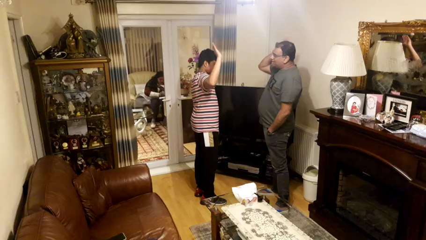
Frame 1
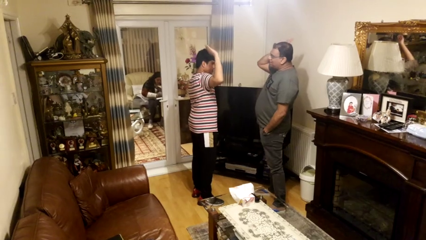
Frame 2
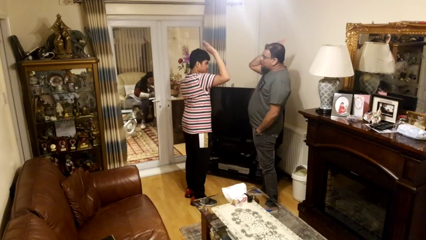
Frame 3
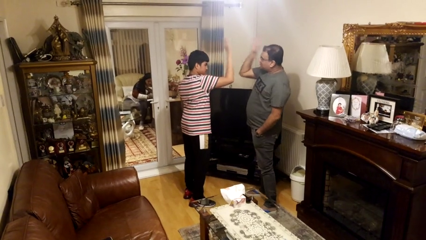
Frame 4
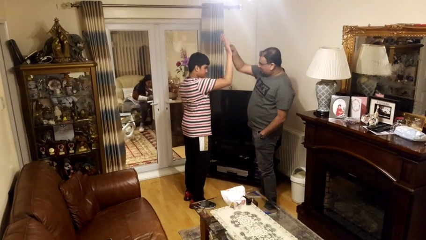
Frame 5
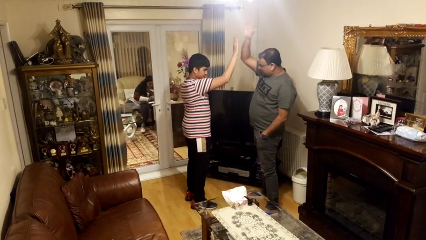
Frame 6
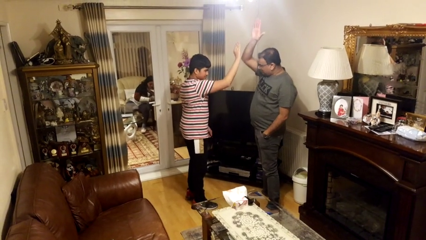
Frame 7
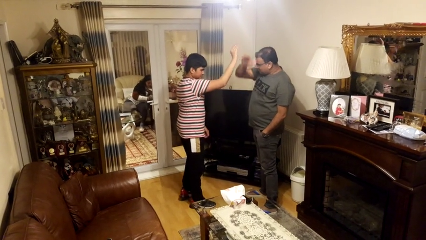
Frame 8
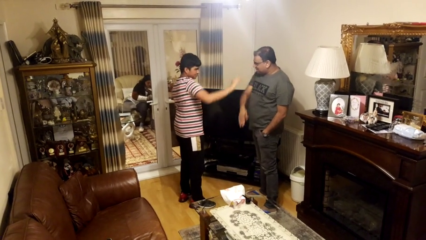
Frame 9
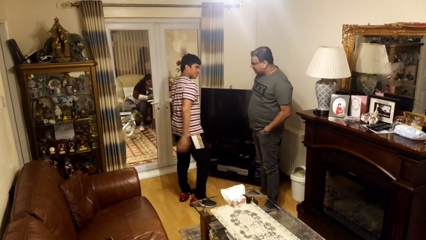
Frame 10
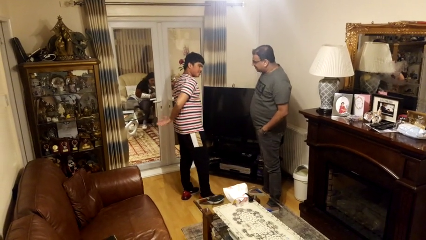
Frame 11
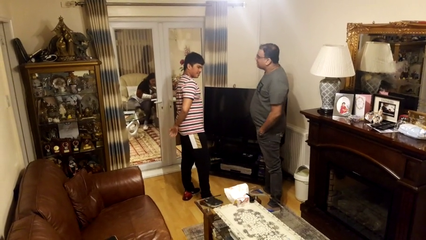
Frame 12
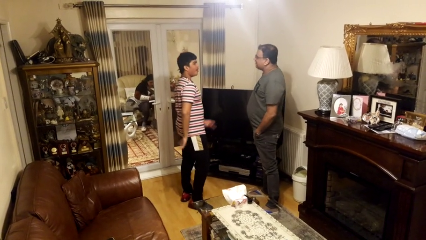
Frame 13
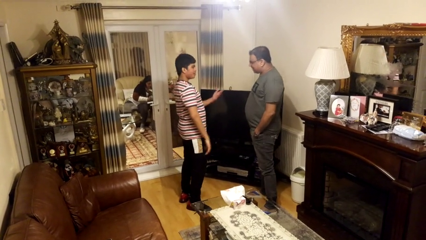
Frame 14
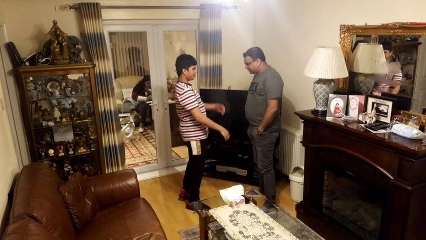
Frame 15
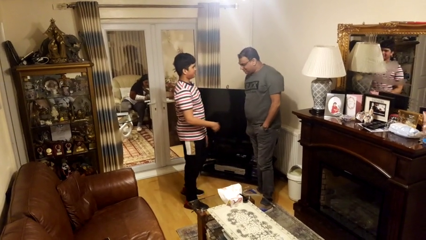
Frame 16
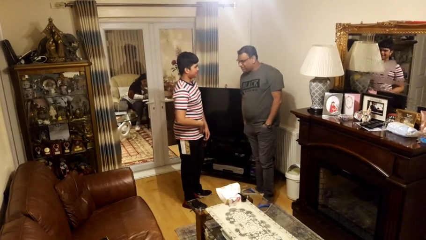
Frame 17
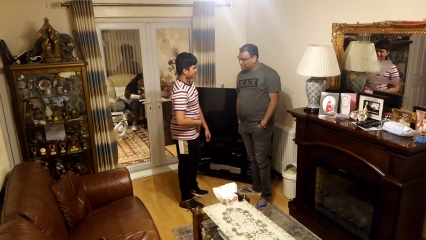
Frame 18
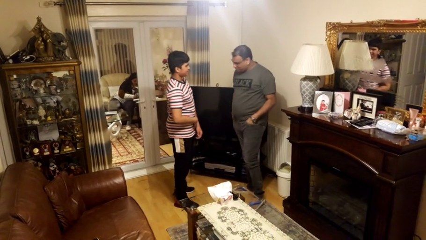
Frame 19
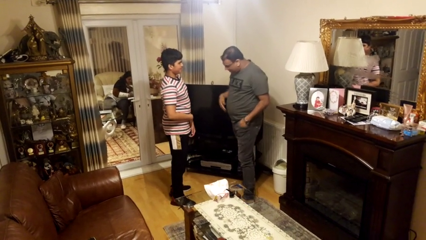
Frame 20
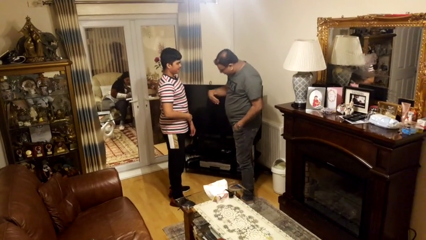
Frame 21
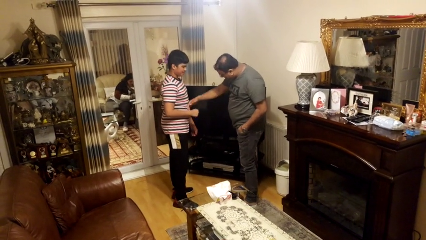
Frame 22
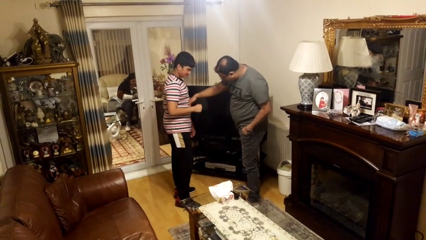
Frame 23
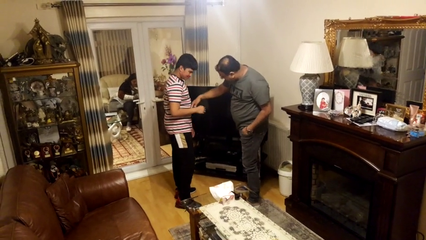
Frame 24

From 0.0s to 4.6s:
person highfives hand

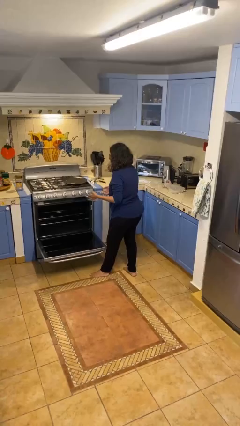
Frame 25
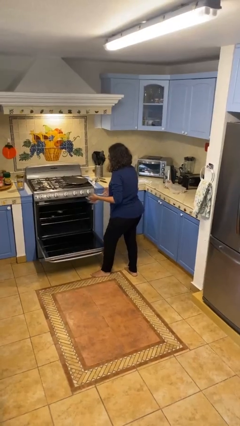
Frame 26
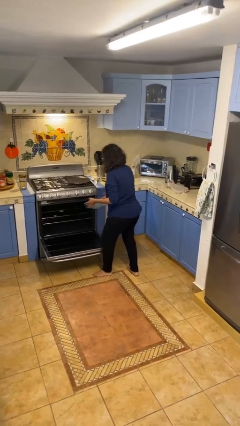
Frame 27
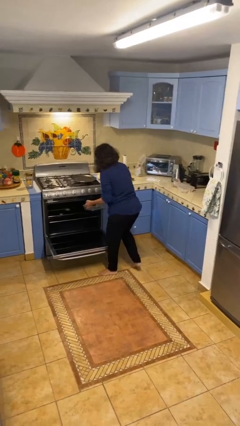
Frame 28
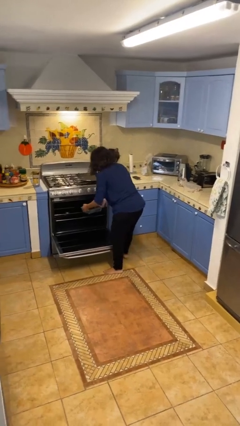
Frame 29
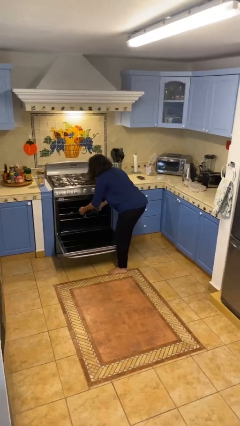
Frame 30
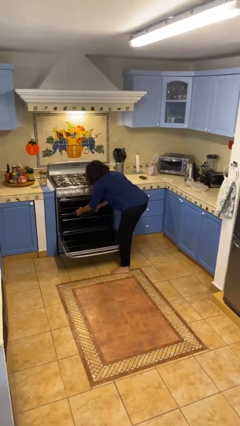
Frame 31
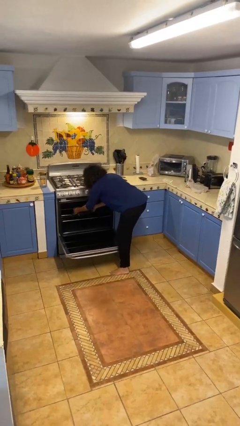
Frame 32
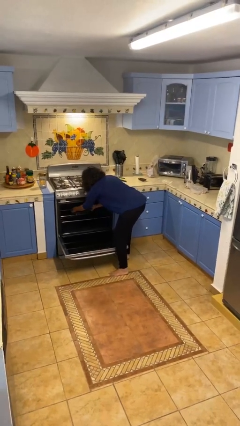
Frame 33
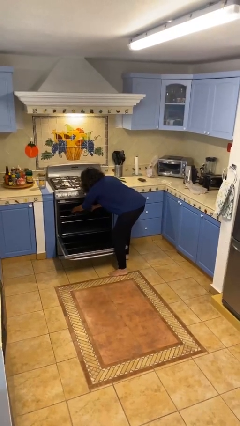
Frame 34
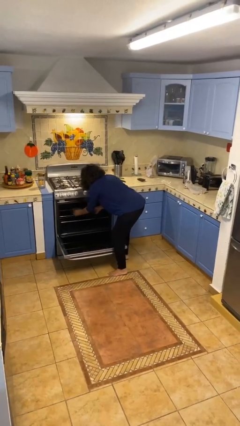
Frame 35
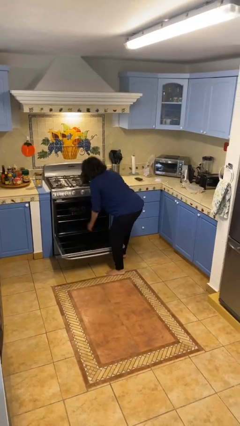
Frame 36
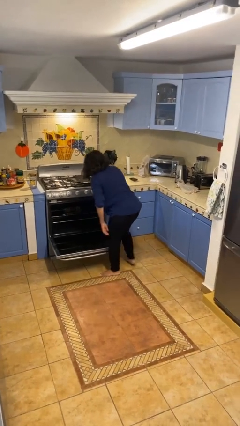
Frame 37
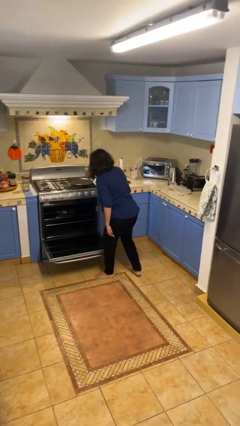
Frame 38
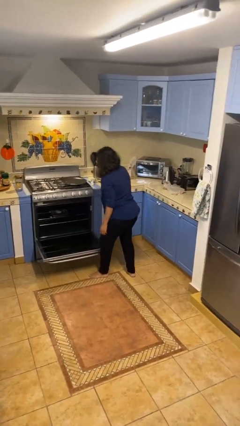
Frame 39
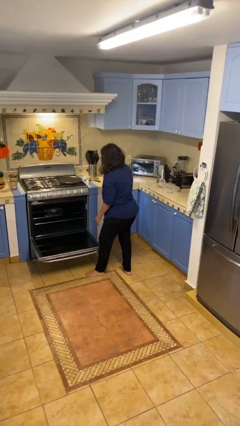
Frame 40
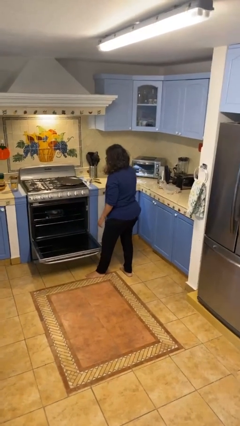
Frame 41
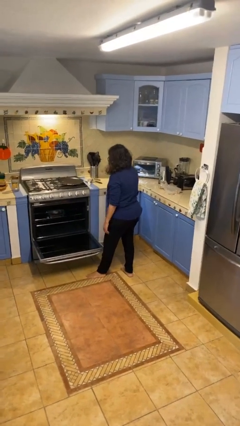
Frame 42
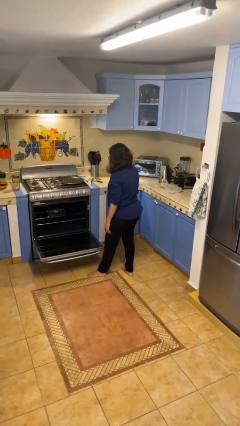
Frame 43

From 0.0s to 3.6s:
person puts object into oven

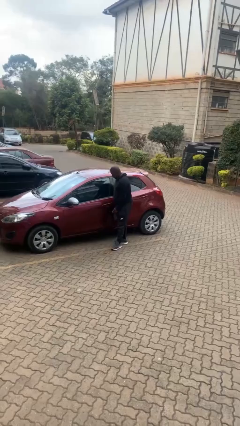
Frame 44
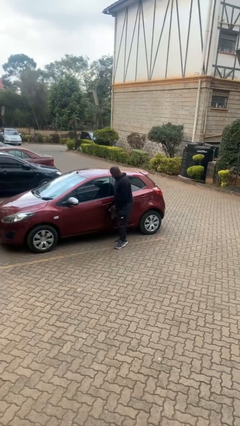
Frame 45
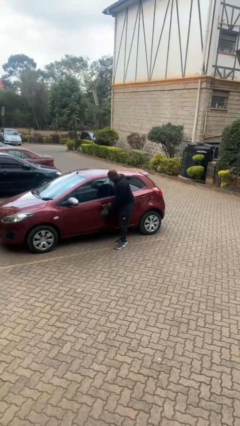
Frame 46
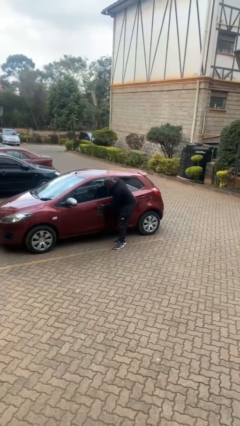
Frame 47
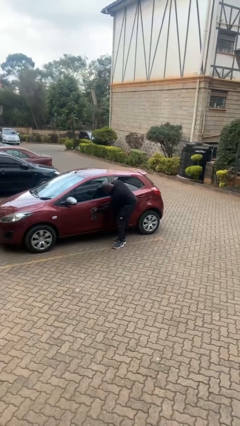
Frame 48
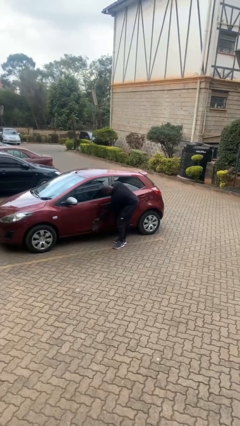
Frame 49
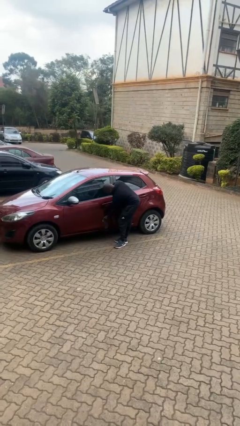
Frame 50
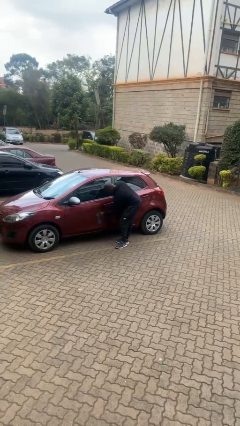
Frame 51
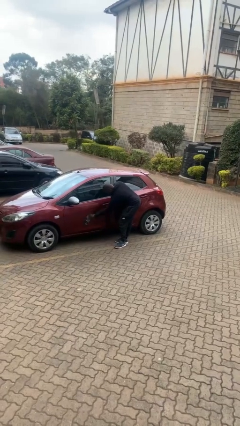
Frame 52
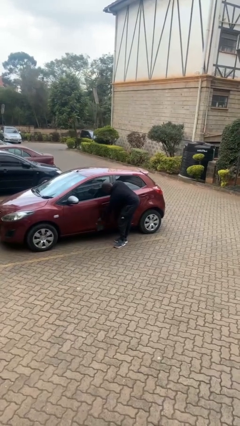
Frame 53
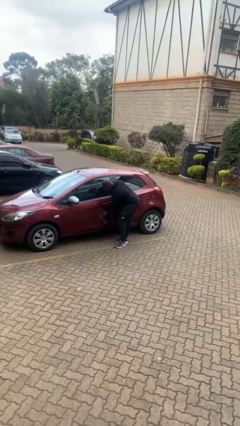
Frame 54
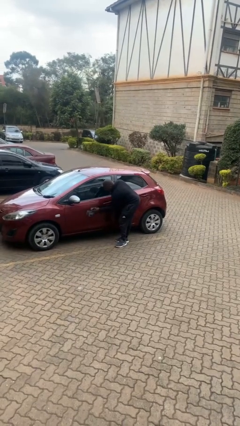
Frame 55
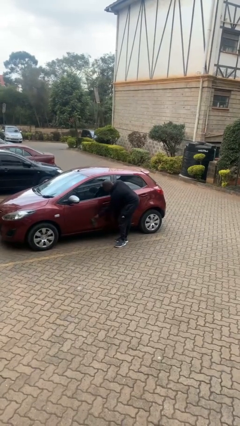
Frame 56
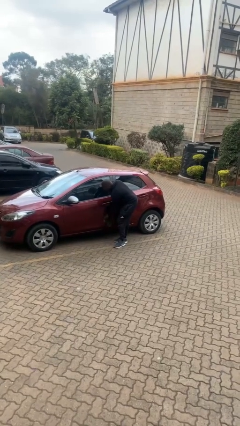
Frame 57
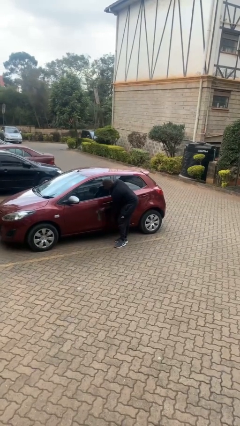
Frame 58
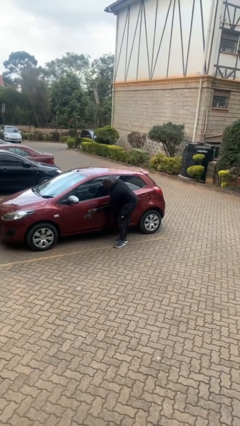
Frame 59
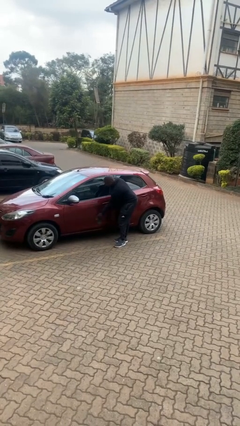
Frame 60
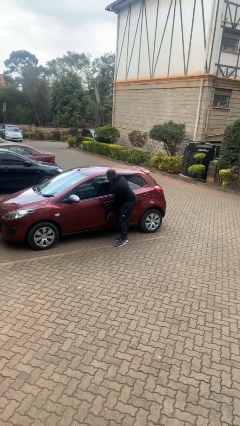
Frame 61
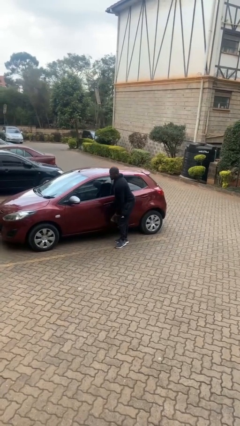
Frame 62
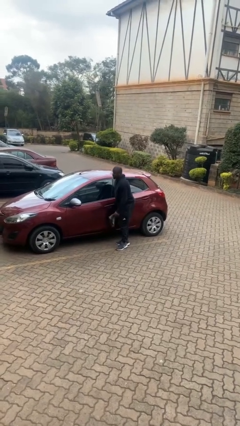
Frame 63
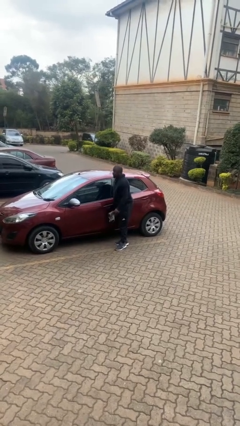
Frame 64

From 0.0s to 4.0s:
person polishes car with rag

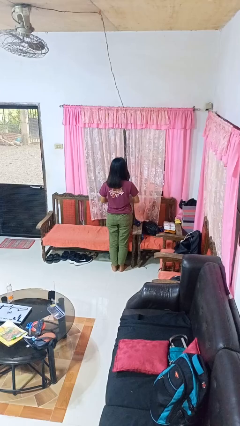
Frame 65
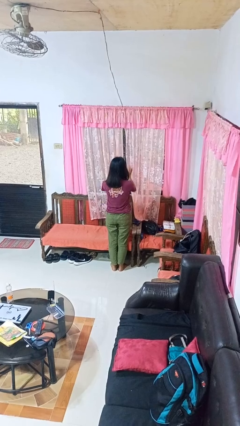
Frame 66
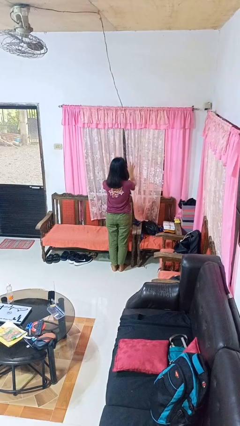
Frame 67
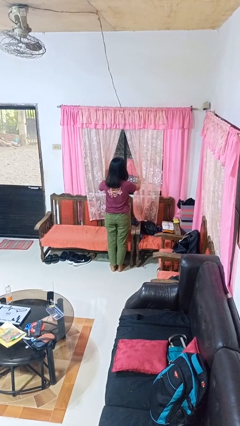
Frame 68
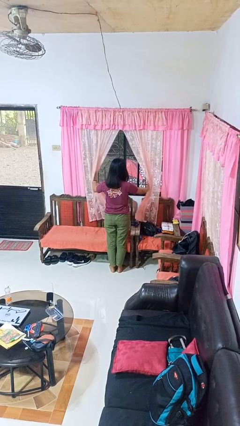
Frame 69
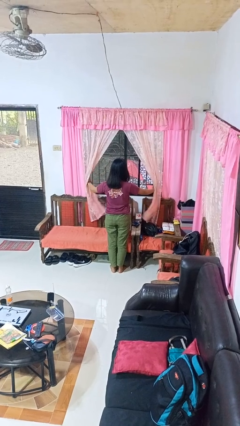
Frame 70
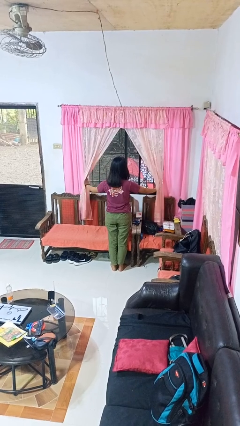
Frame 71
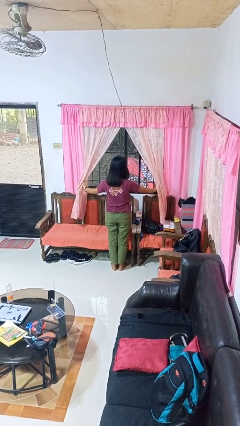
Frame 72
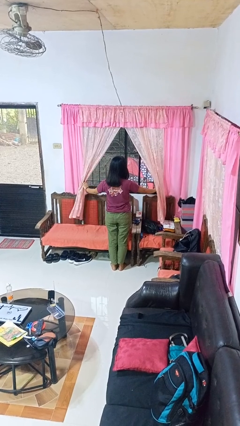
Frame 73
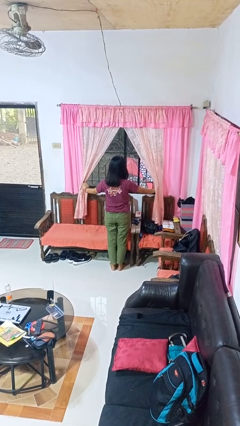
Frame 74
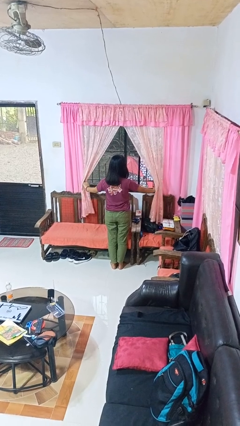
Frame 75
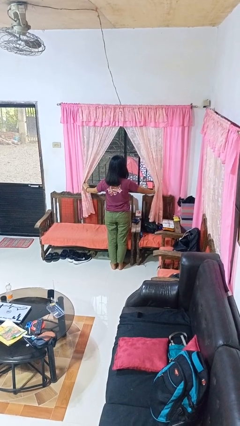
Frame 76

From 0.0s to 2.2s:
person opens curtains

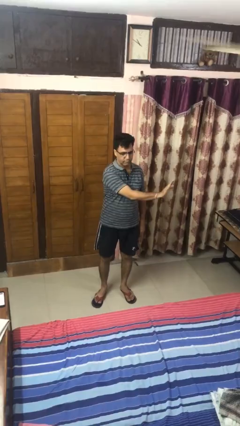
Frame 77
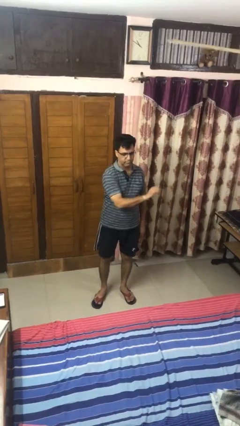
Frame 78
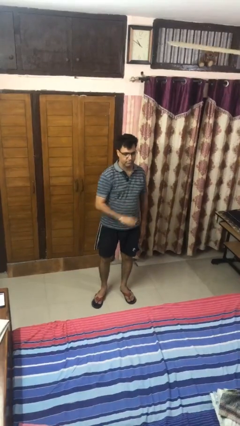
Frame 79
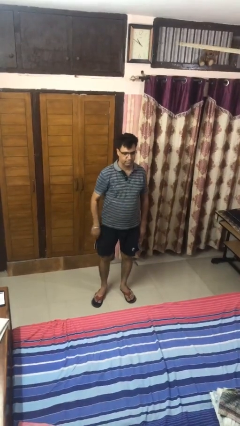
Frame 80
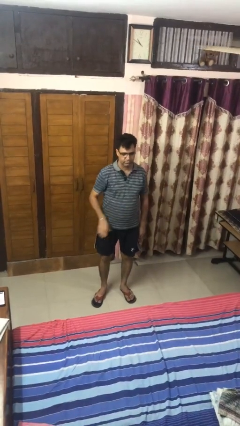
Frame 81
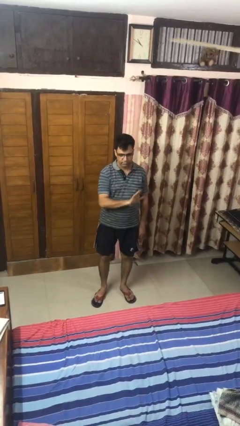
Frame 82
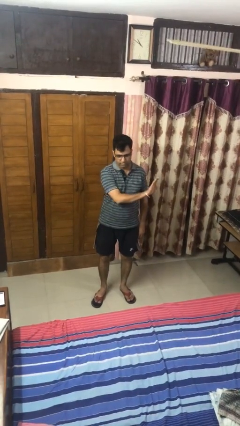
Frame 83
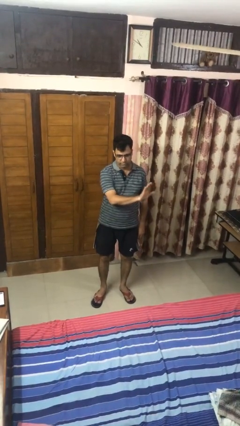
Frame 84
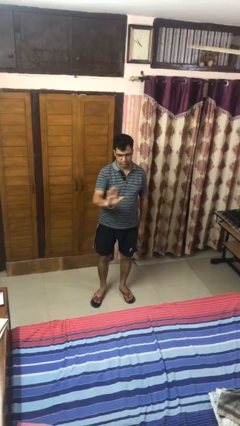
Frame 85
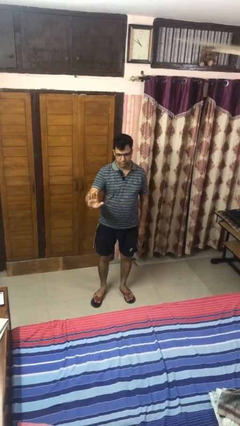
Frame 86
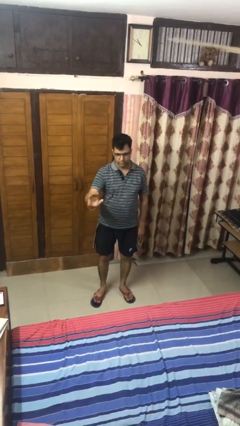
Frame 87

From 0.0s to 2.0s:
person gestures swipe right

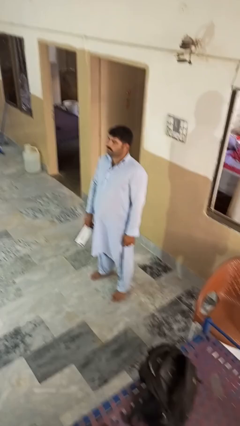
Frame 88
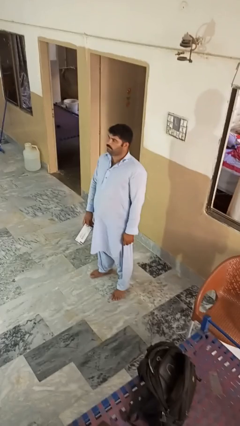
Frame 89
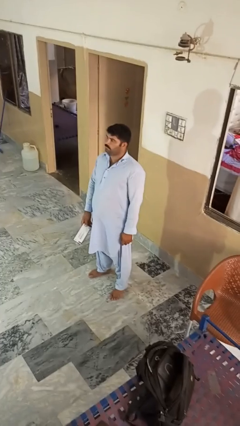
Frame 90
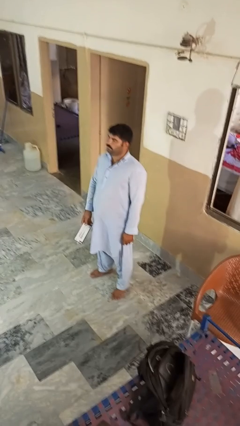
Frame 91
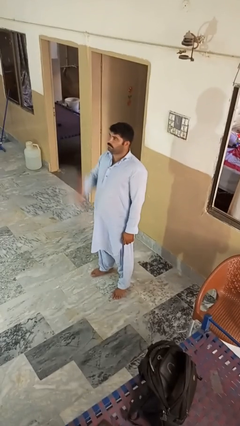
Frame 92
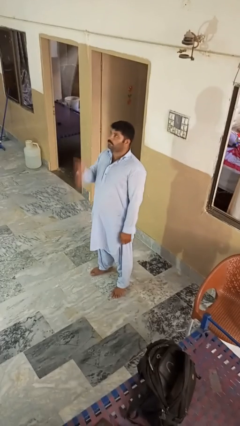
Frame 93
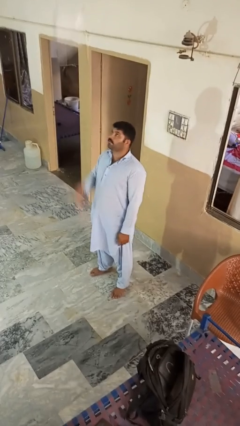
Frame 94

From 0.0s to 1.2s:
person drops object
